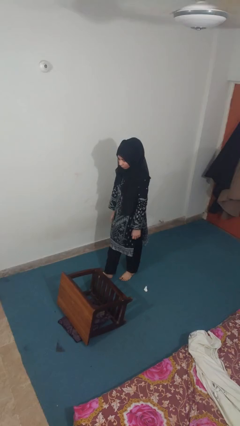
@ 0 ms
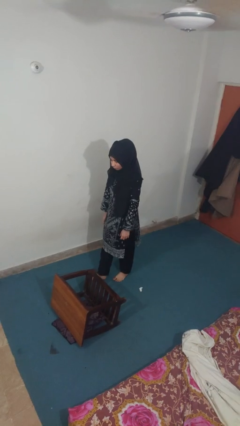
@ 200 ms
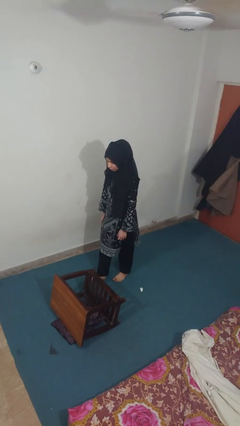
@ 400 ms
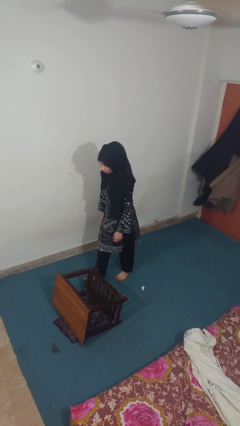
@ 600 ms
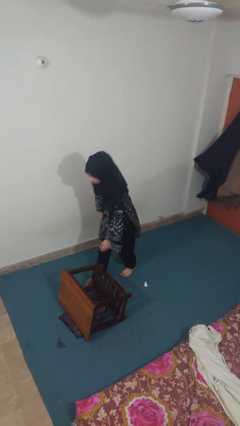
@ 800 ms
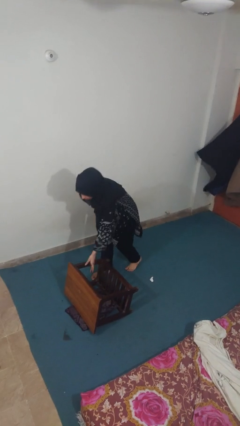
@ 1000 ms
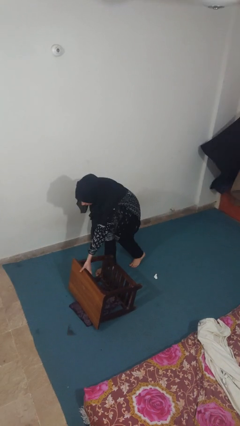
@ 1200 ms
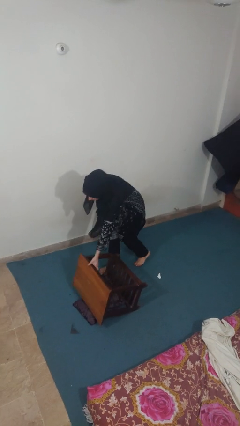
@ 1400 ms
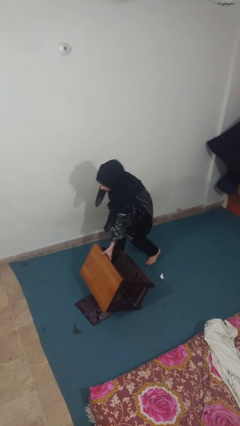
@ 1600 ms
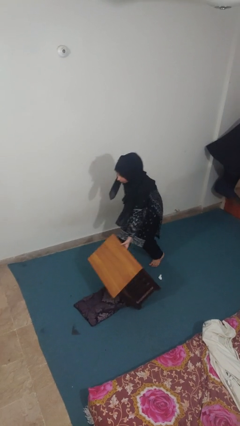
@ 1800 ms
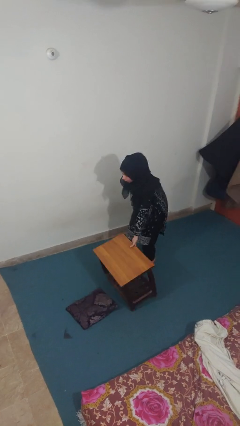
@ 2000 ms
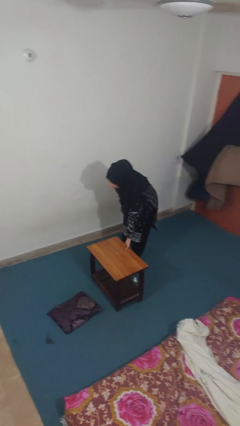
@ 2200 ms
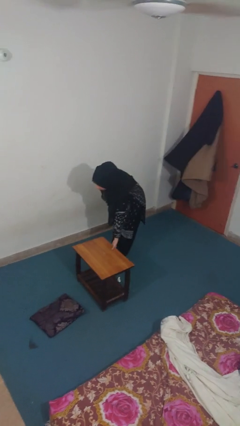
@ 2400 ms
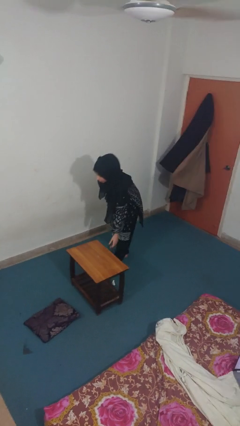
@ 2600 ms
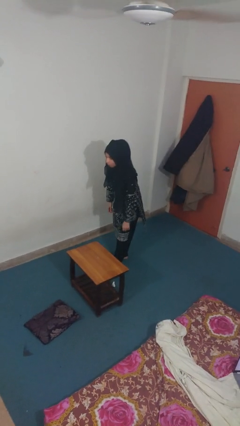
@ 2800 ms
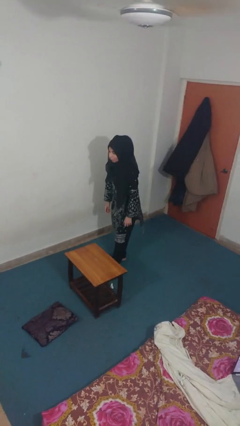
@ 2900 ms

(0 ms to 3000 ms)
person sets upright furniture

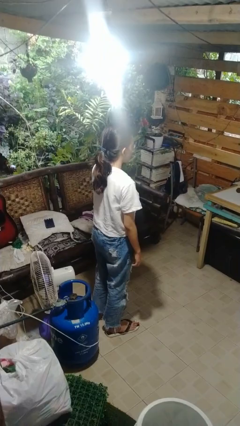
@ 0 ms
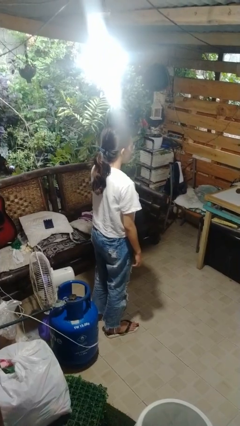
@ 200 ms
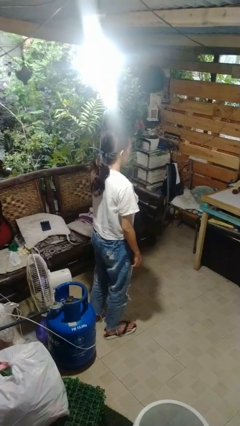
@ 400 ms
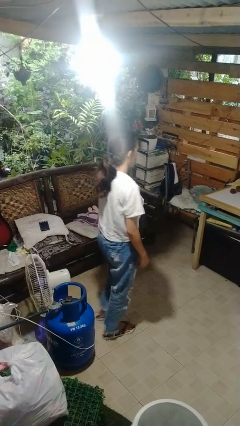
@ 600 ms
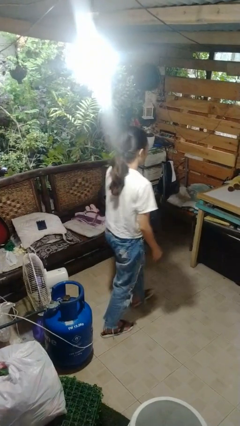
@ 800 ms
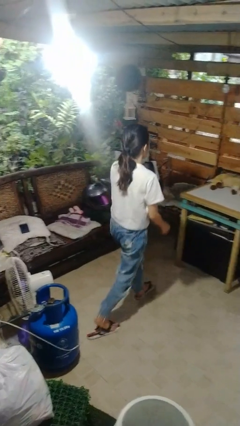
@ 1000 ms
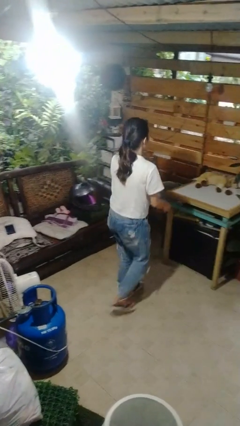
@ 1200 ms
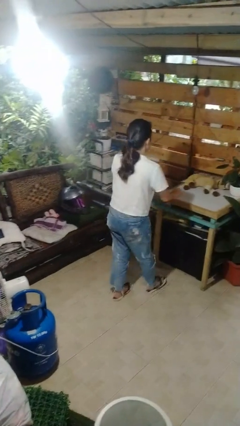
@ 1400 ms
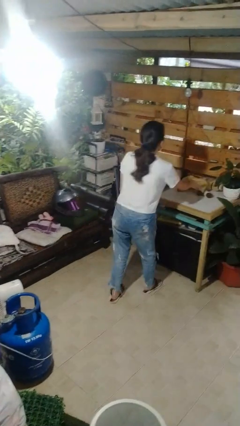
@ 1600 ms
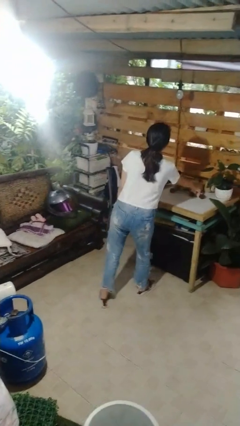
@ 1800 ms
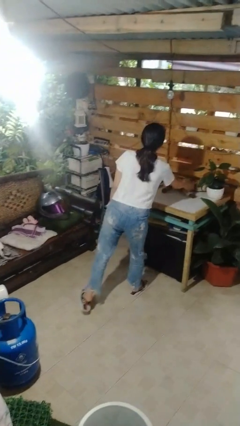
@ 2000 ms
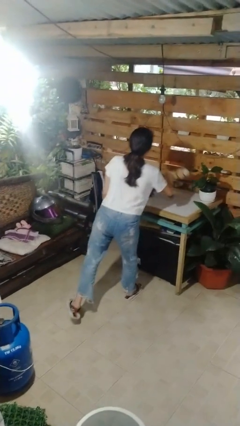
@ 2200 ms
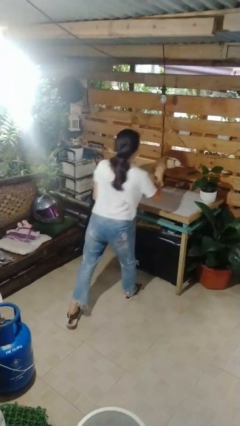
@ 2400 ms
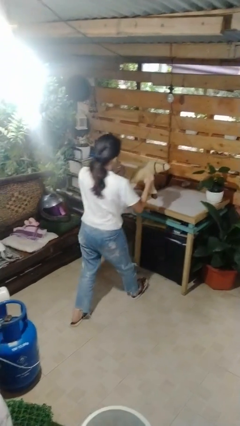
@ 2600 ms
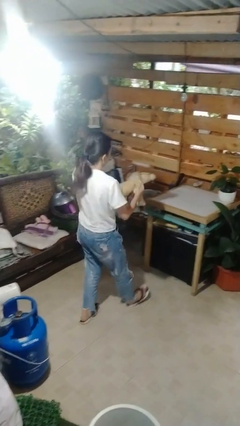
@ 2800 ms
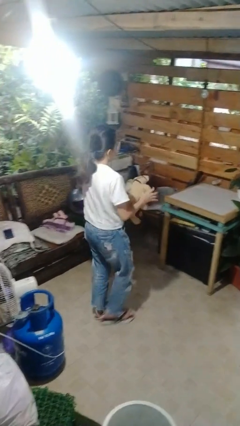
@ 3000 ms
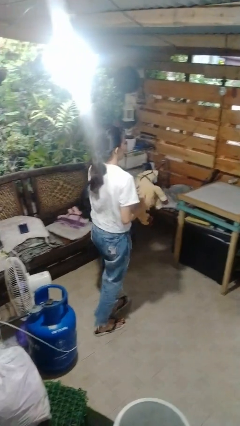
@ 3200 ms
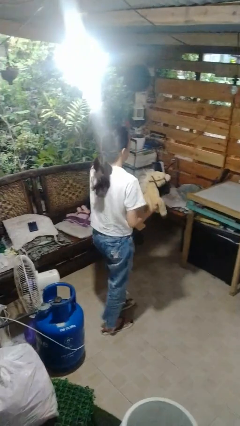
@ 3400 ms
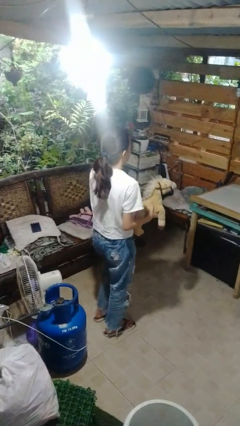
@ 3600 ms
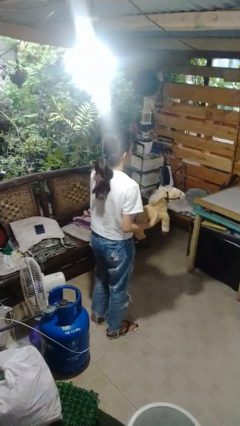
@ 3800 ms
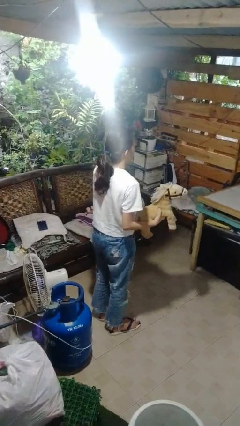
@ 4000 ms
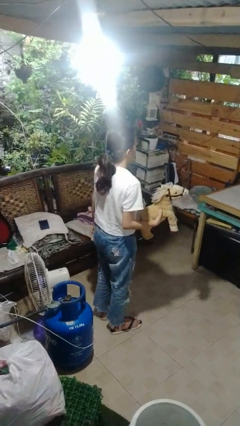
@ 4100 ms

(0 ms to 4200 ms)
person picks up object from table

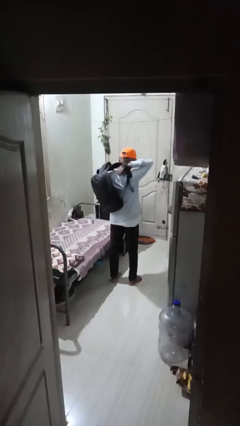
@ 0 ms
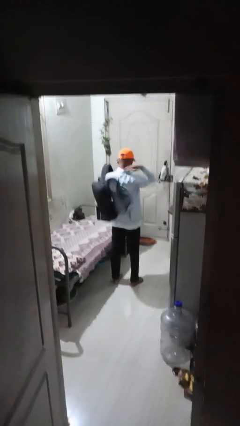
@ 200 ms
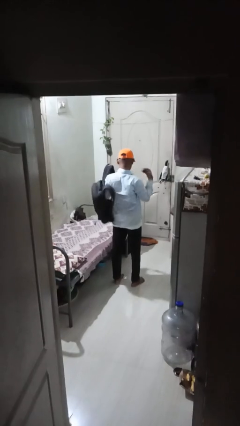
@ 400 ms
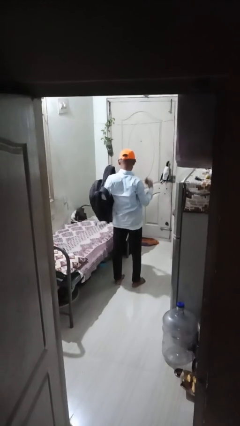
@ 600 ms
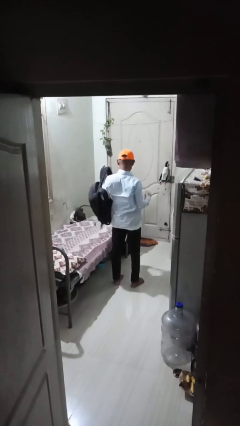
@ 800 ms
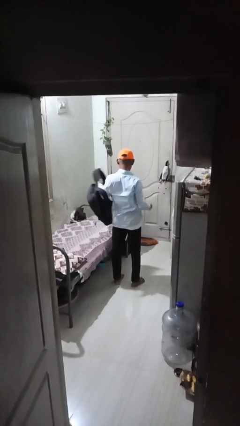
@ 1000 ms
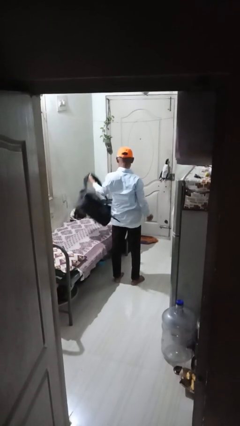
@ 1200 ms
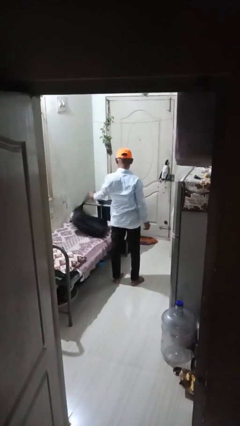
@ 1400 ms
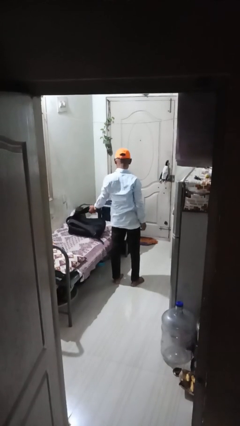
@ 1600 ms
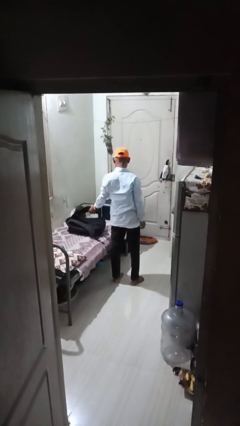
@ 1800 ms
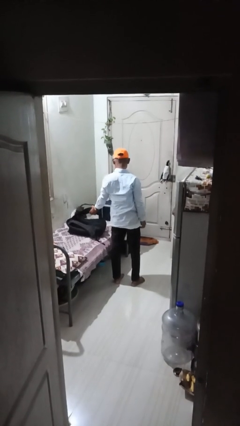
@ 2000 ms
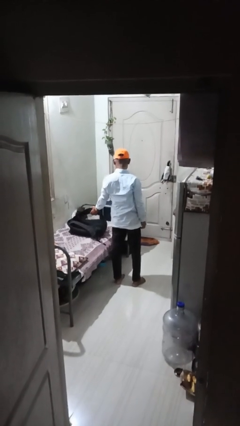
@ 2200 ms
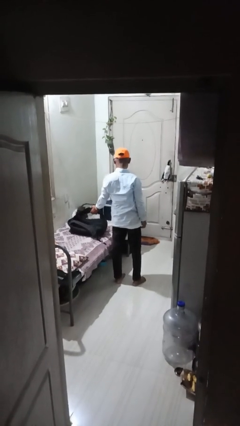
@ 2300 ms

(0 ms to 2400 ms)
person takes off backpack

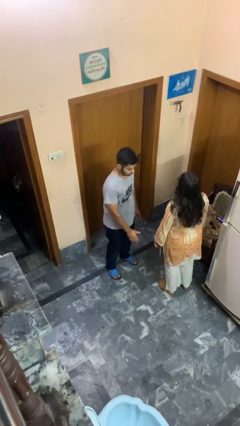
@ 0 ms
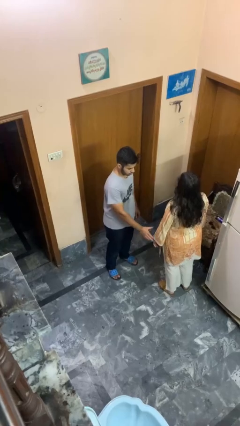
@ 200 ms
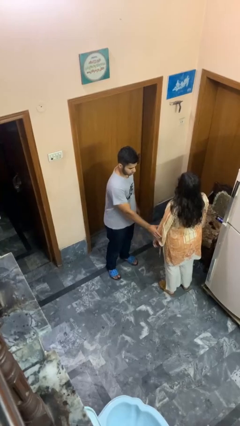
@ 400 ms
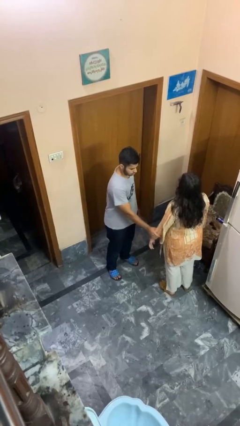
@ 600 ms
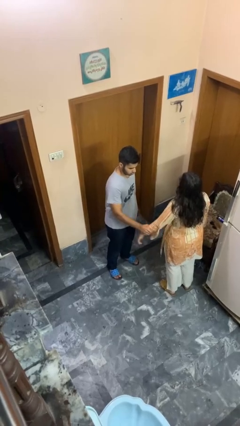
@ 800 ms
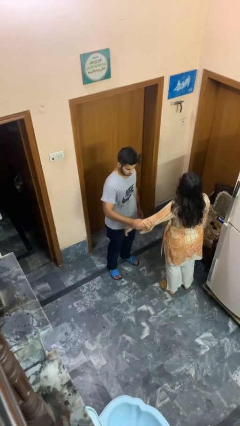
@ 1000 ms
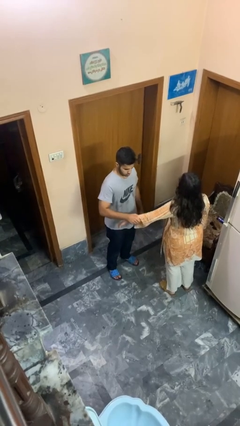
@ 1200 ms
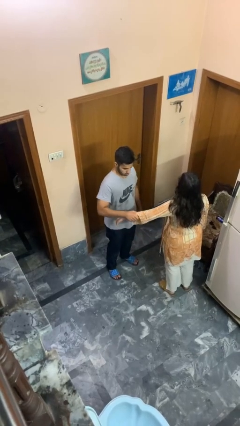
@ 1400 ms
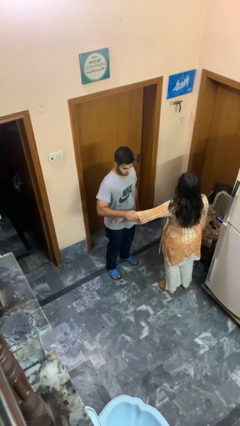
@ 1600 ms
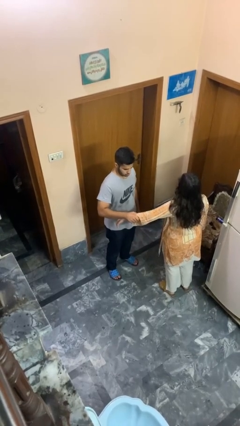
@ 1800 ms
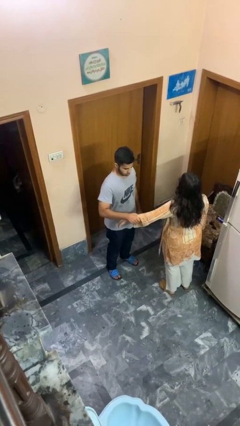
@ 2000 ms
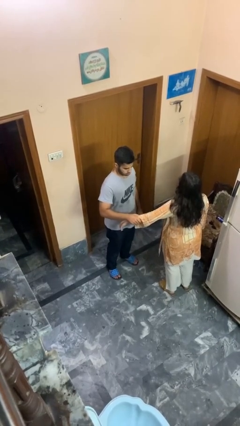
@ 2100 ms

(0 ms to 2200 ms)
person grabs person by forearm

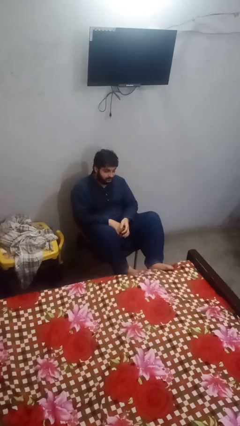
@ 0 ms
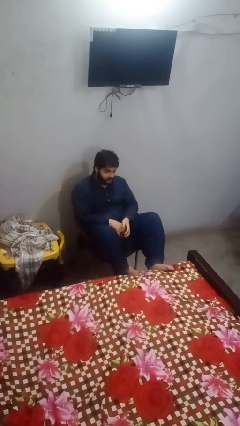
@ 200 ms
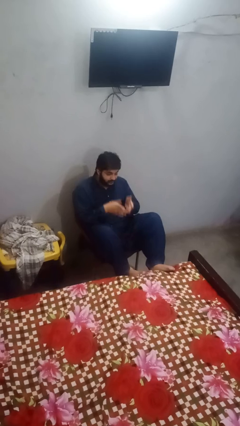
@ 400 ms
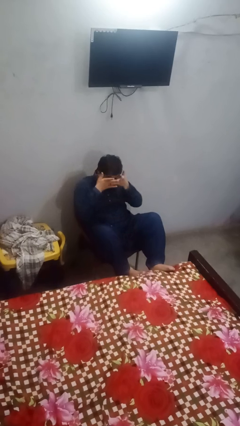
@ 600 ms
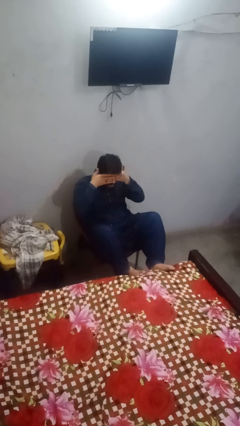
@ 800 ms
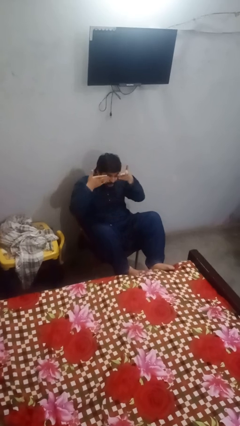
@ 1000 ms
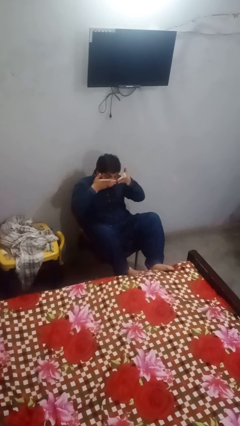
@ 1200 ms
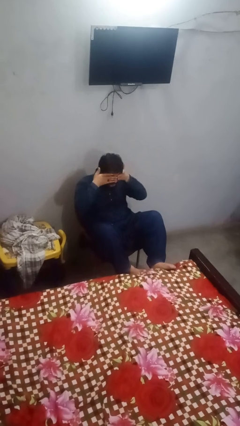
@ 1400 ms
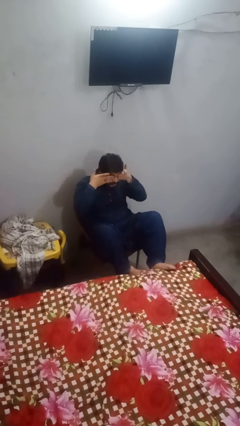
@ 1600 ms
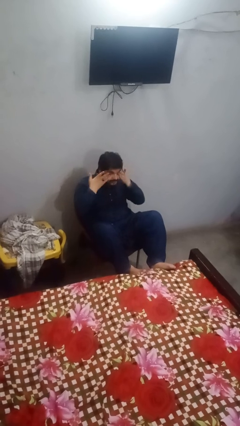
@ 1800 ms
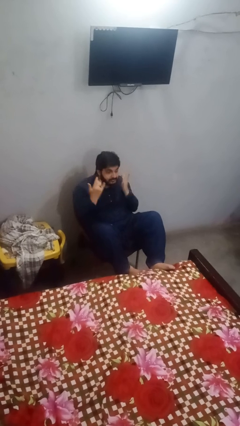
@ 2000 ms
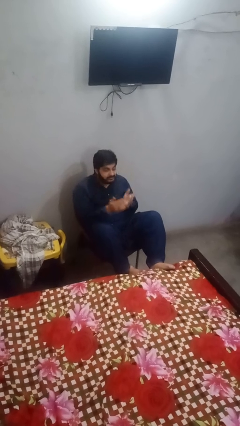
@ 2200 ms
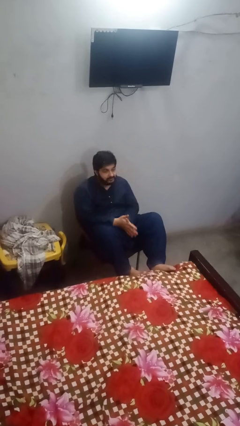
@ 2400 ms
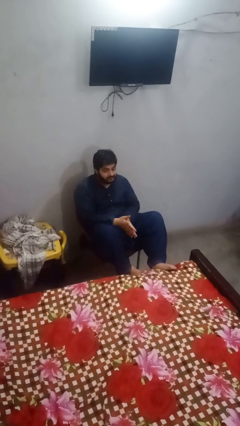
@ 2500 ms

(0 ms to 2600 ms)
person rubs eyes

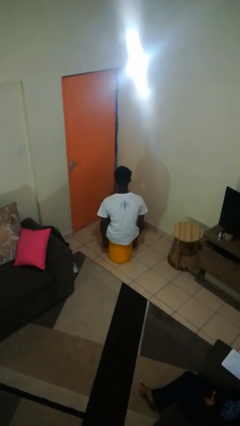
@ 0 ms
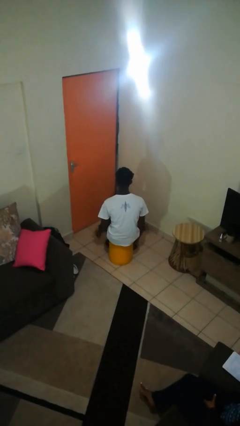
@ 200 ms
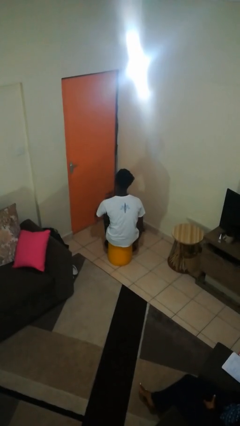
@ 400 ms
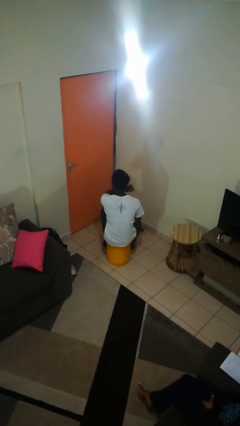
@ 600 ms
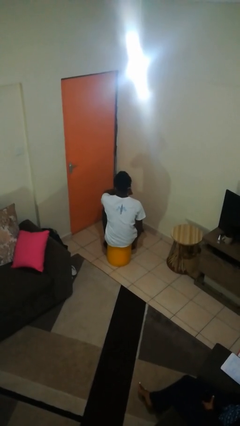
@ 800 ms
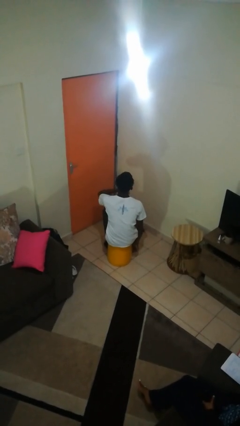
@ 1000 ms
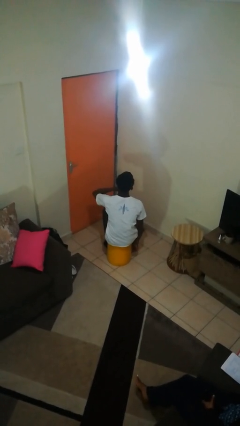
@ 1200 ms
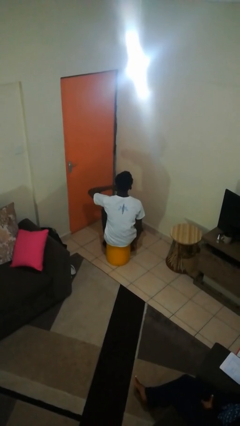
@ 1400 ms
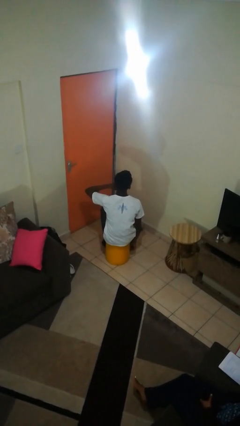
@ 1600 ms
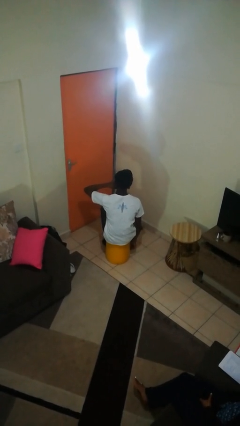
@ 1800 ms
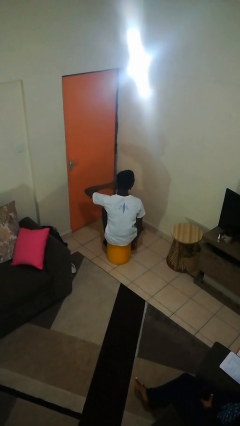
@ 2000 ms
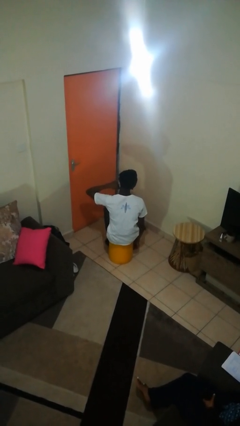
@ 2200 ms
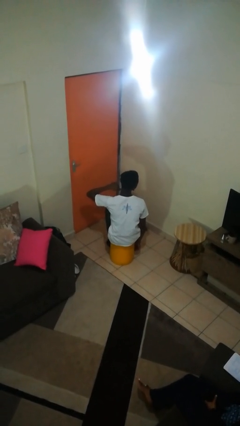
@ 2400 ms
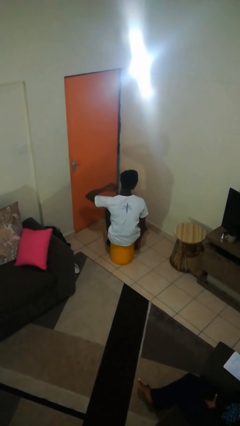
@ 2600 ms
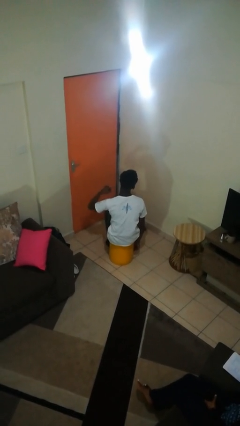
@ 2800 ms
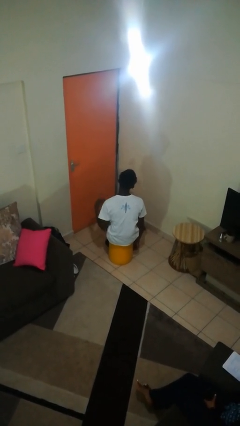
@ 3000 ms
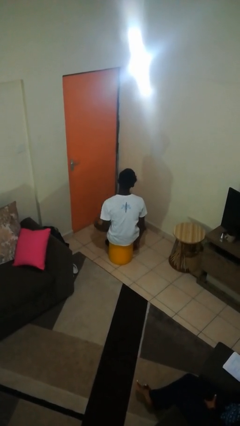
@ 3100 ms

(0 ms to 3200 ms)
person gestures cut
